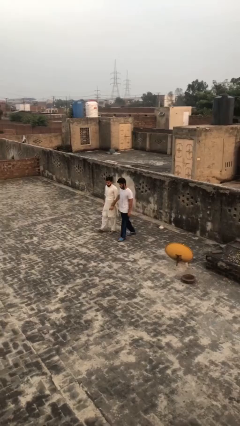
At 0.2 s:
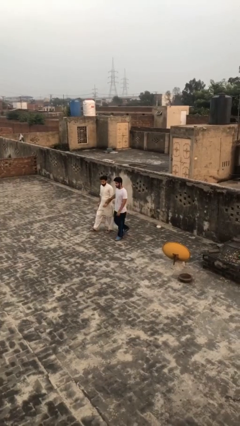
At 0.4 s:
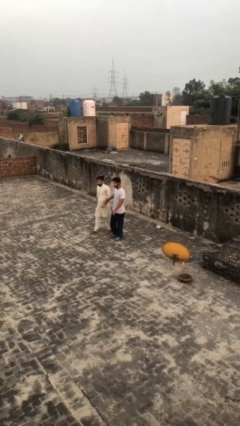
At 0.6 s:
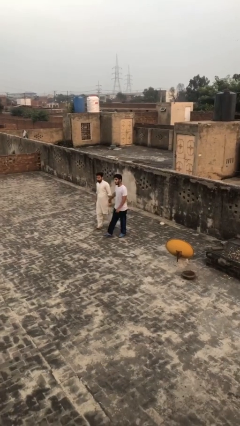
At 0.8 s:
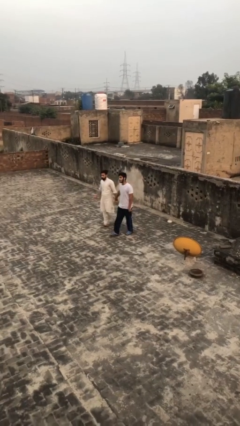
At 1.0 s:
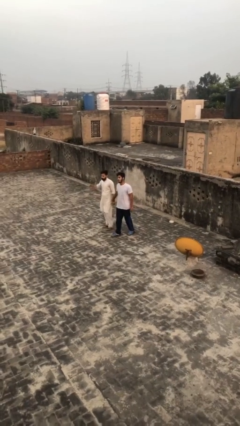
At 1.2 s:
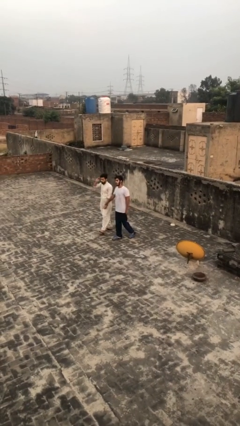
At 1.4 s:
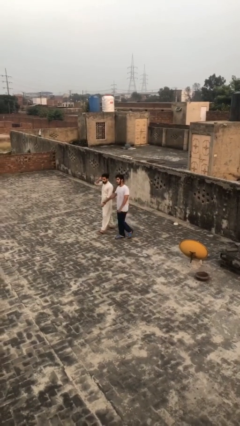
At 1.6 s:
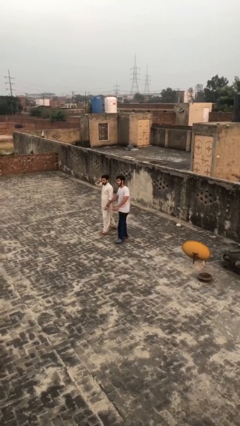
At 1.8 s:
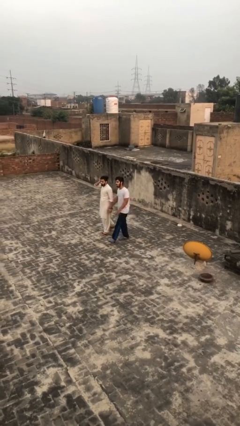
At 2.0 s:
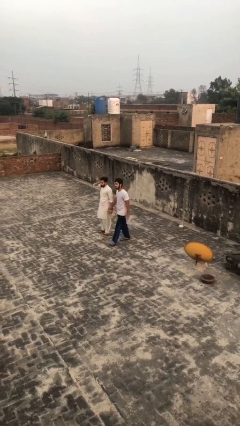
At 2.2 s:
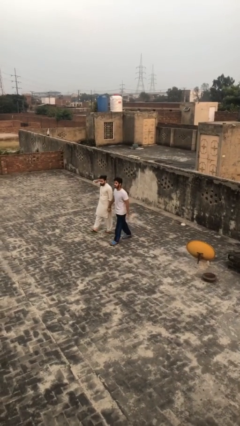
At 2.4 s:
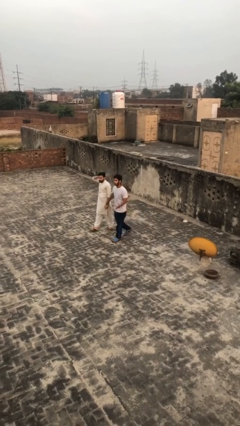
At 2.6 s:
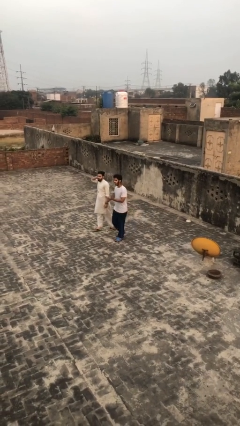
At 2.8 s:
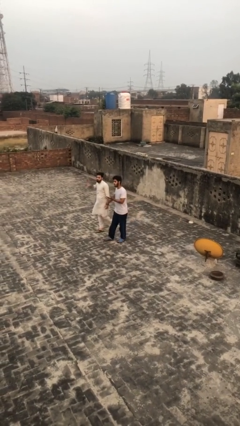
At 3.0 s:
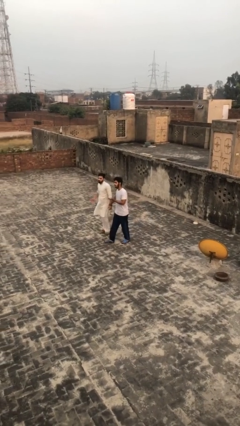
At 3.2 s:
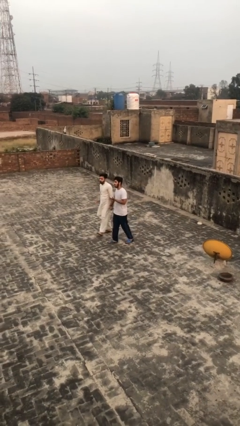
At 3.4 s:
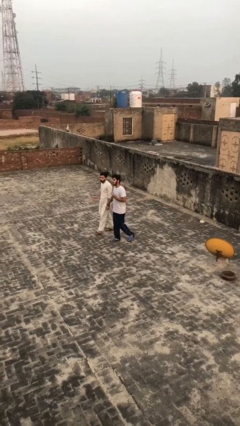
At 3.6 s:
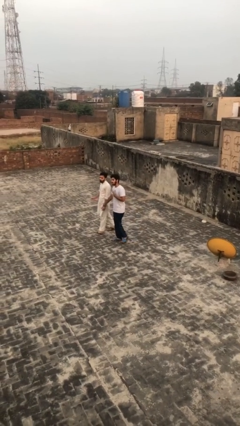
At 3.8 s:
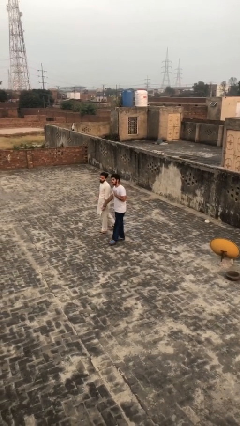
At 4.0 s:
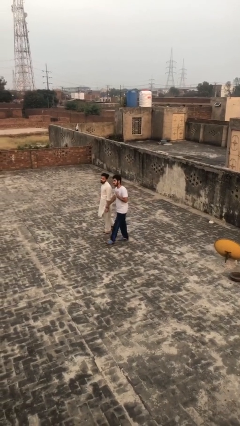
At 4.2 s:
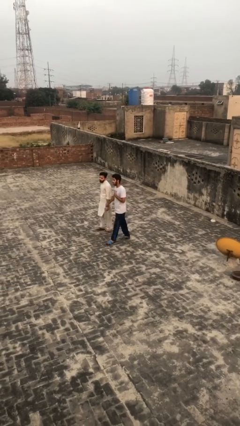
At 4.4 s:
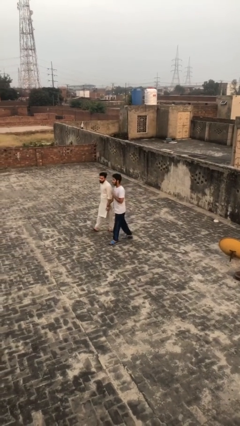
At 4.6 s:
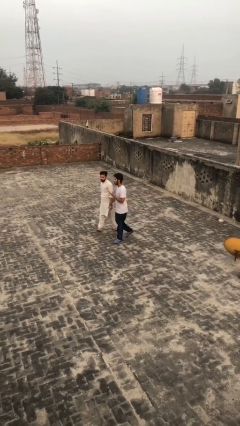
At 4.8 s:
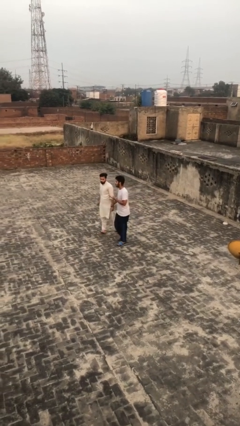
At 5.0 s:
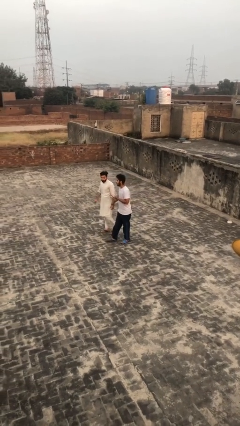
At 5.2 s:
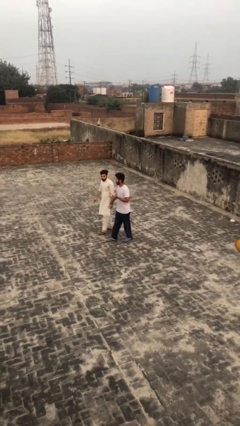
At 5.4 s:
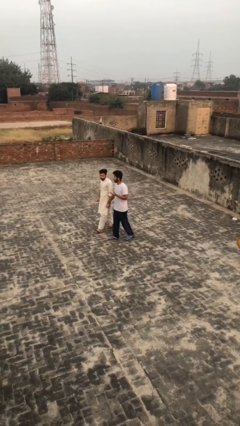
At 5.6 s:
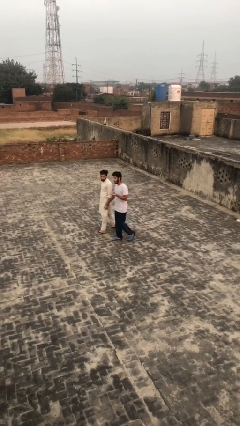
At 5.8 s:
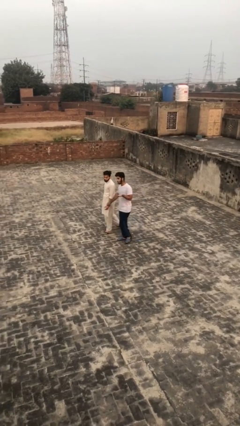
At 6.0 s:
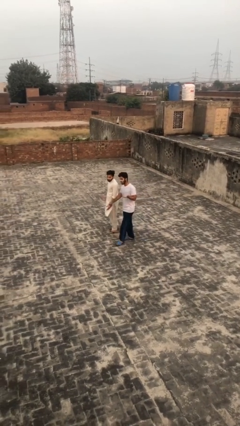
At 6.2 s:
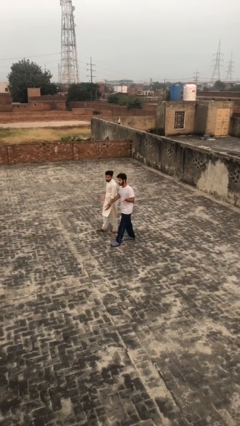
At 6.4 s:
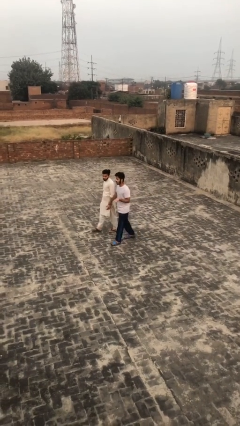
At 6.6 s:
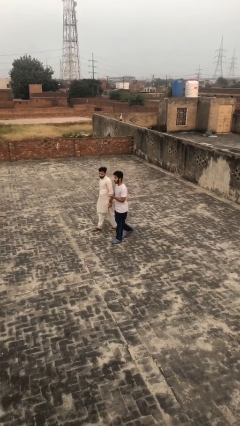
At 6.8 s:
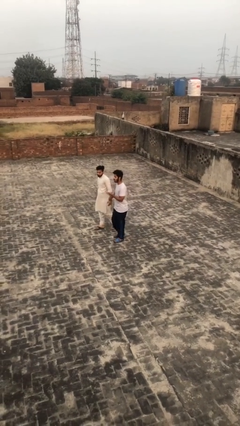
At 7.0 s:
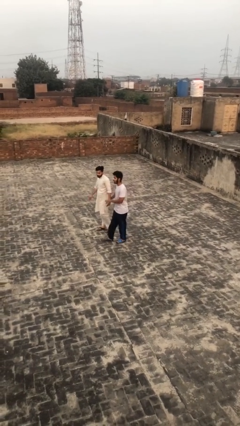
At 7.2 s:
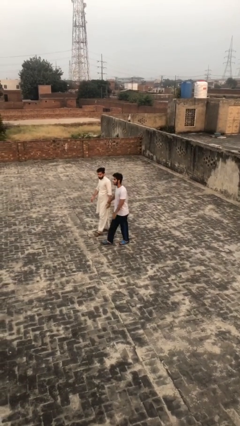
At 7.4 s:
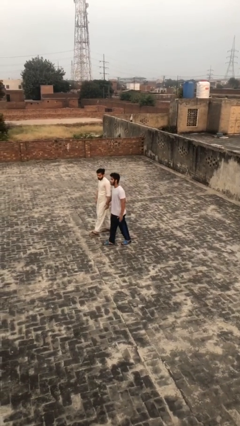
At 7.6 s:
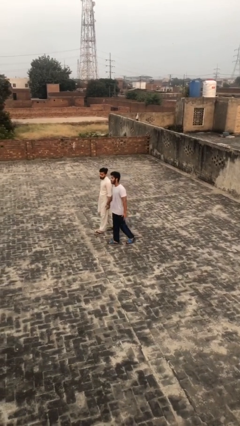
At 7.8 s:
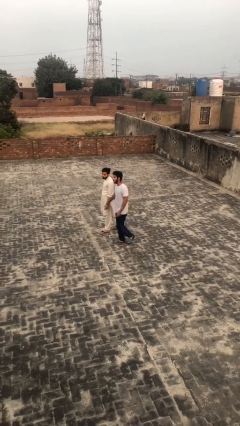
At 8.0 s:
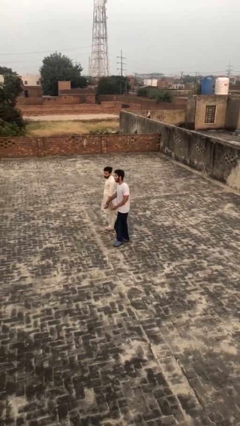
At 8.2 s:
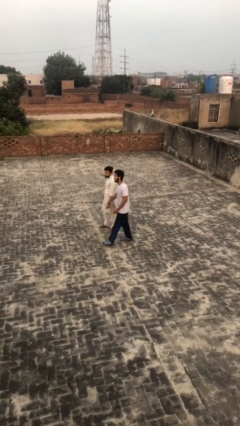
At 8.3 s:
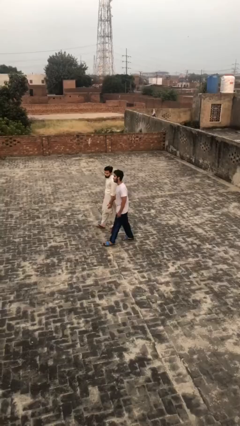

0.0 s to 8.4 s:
person holds hand

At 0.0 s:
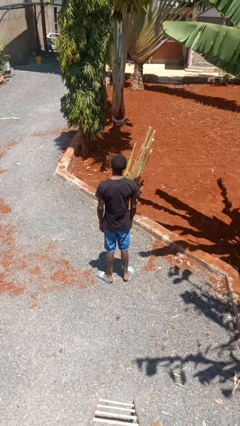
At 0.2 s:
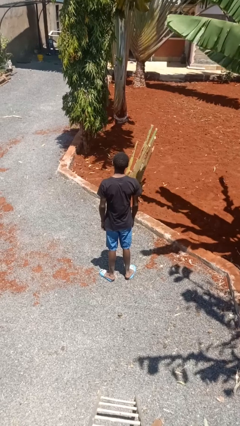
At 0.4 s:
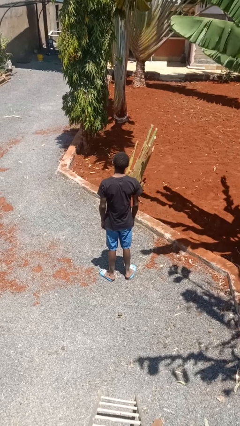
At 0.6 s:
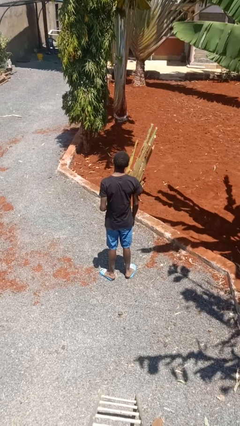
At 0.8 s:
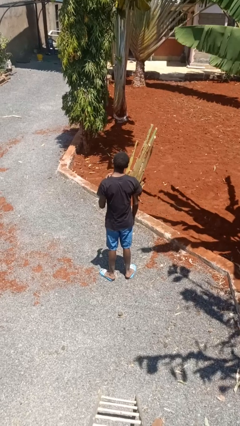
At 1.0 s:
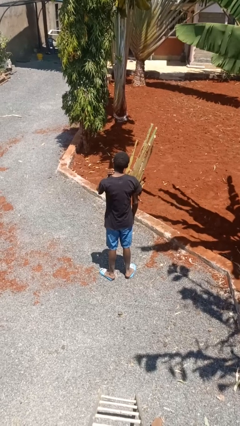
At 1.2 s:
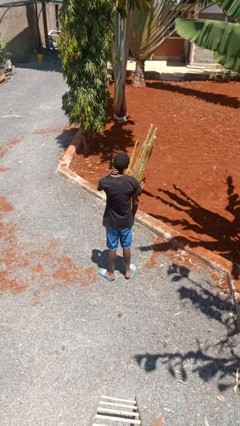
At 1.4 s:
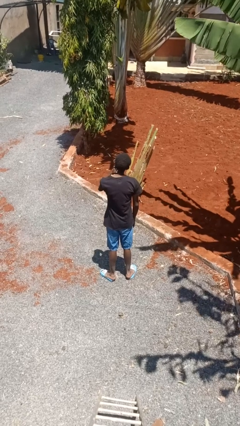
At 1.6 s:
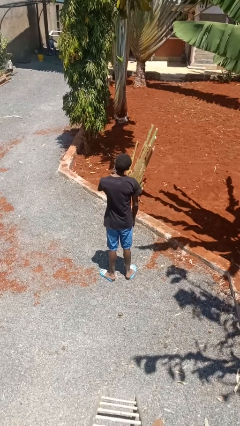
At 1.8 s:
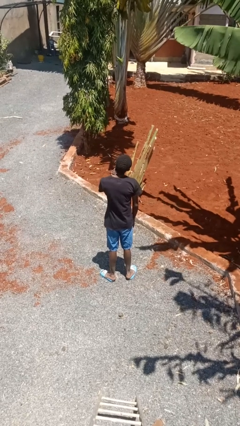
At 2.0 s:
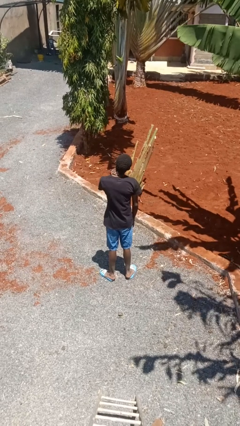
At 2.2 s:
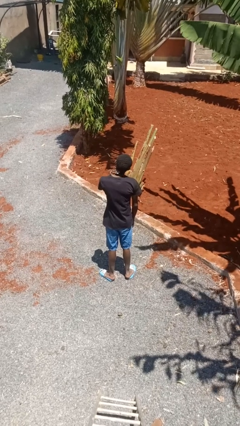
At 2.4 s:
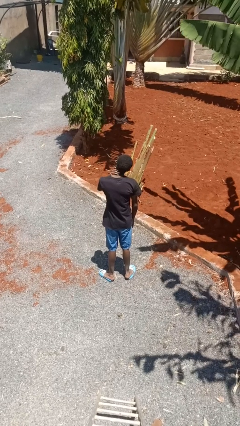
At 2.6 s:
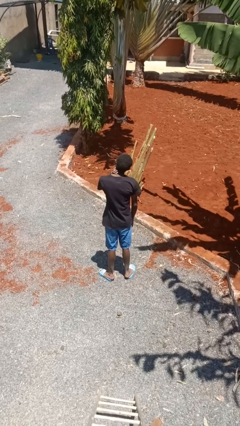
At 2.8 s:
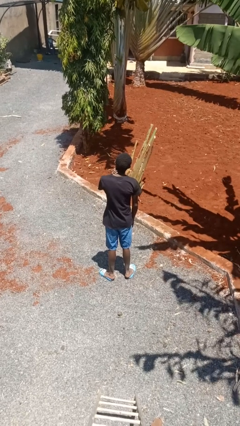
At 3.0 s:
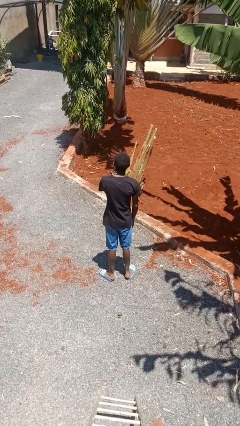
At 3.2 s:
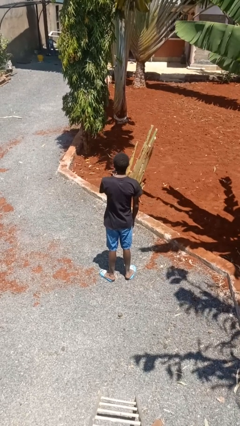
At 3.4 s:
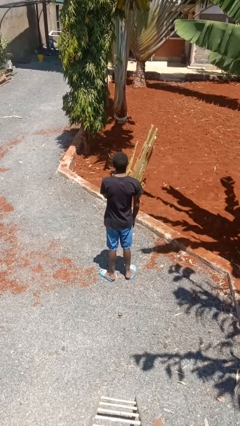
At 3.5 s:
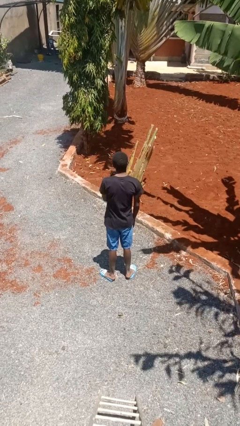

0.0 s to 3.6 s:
person rubs neck

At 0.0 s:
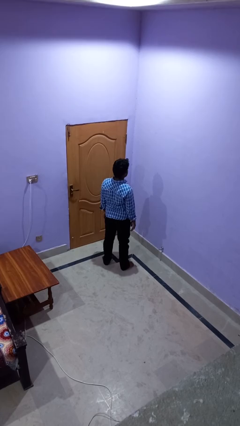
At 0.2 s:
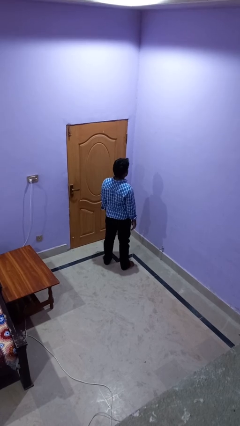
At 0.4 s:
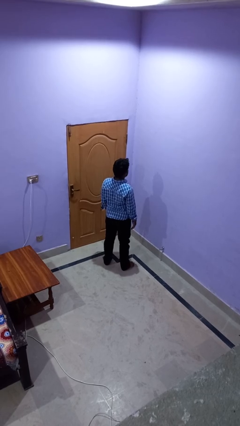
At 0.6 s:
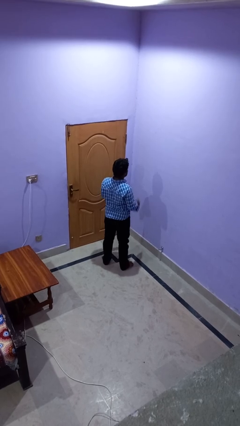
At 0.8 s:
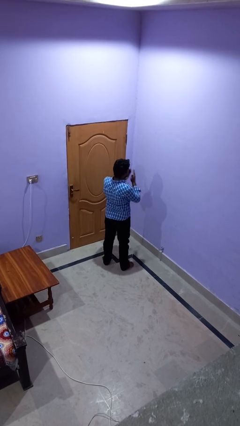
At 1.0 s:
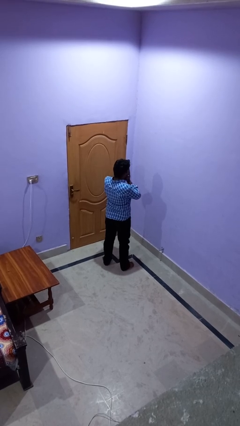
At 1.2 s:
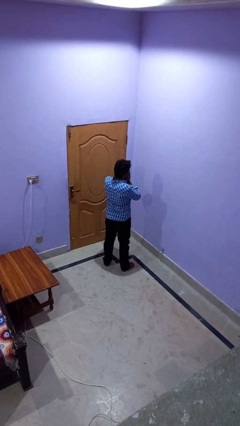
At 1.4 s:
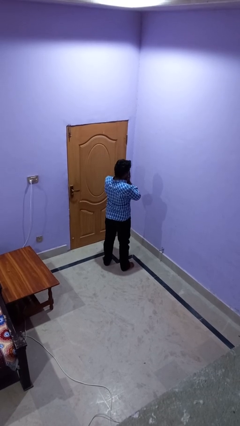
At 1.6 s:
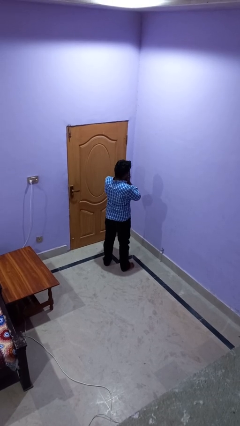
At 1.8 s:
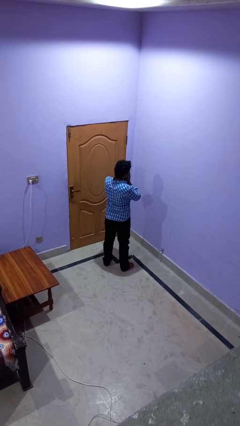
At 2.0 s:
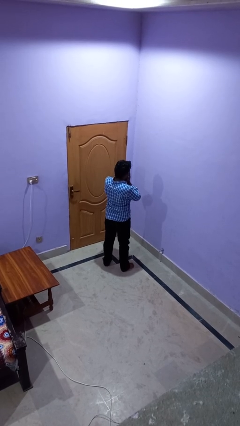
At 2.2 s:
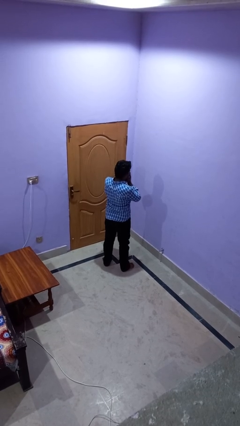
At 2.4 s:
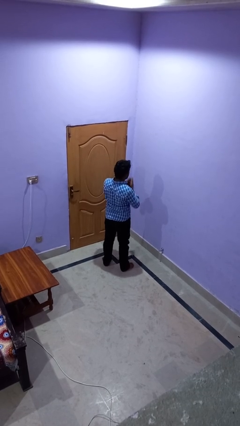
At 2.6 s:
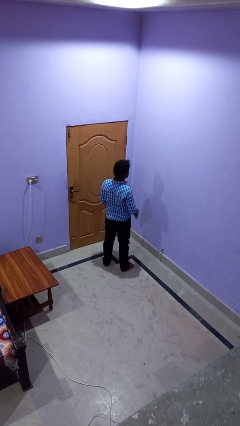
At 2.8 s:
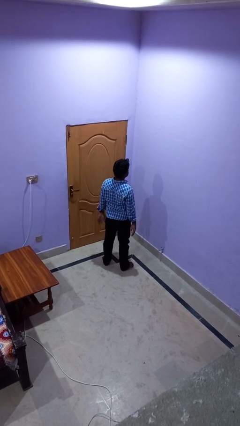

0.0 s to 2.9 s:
person sneezes into hand

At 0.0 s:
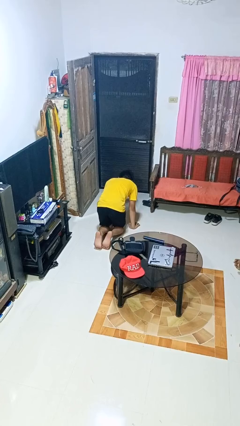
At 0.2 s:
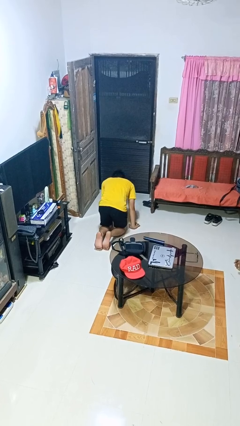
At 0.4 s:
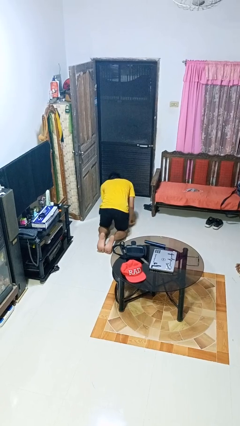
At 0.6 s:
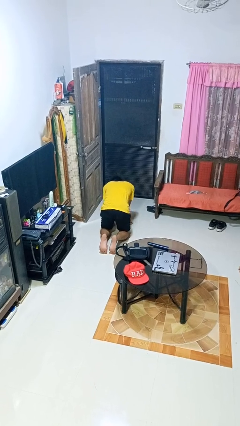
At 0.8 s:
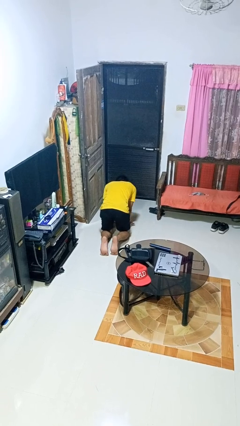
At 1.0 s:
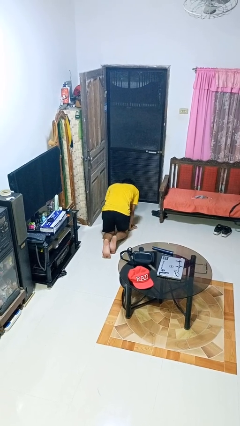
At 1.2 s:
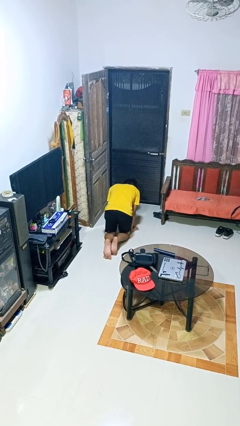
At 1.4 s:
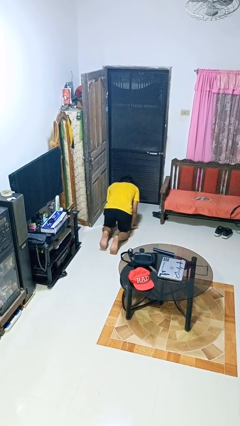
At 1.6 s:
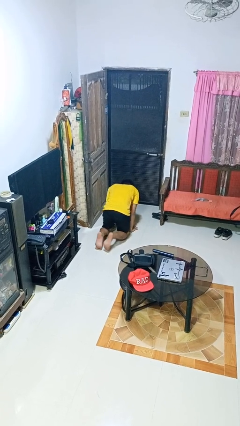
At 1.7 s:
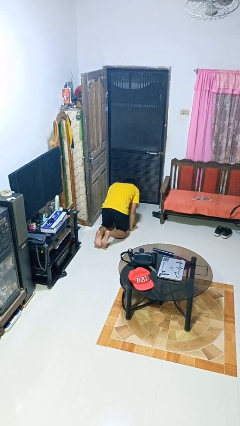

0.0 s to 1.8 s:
person crawls

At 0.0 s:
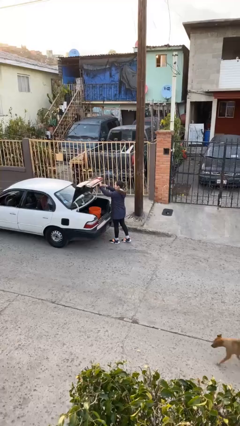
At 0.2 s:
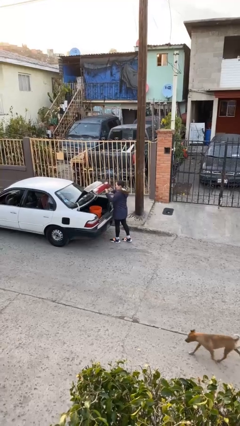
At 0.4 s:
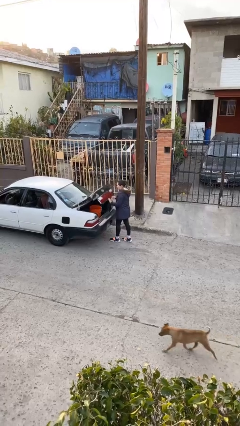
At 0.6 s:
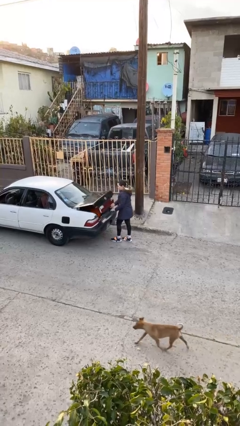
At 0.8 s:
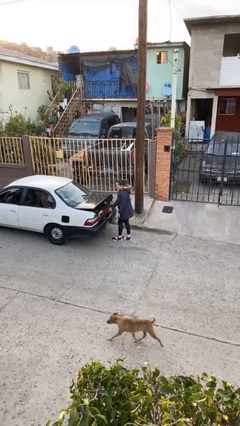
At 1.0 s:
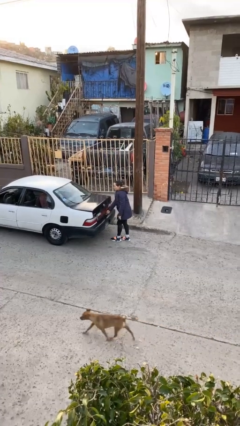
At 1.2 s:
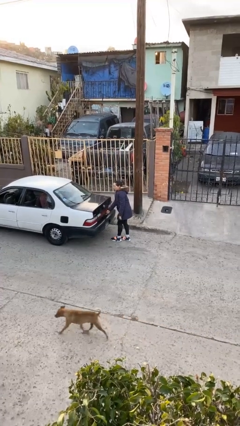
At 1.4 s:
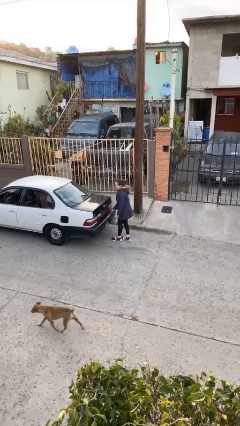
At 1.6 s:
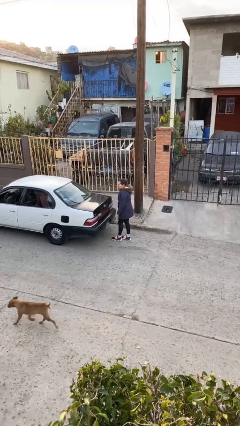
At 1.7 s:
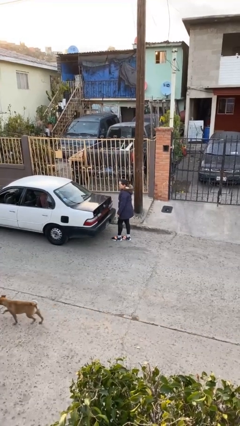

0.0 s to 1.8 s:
person closes car trunk
